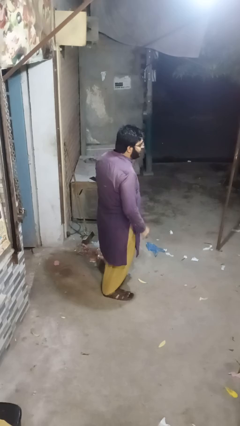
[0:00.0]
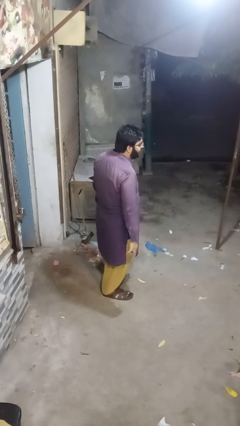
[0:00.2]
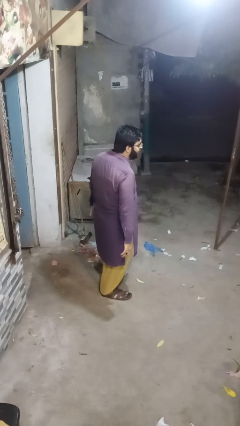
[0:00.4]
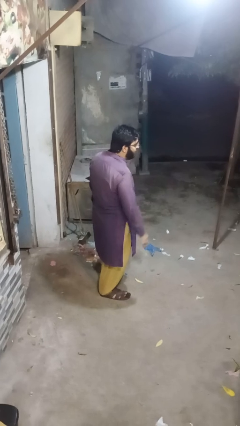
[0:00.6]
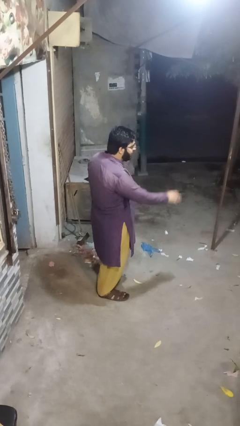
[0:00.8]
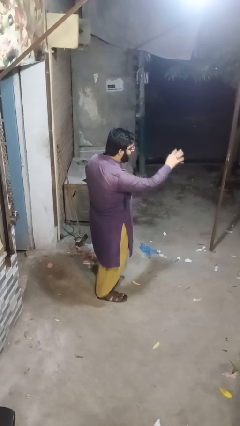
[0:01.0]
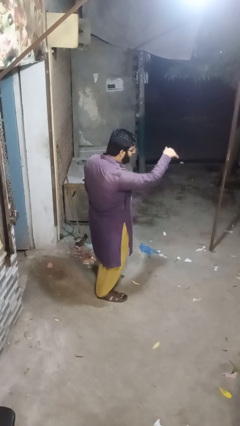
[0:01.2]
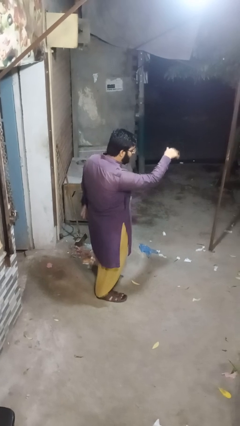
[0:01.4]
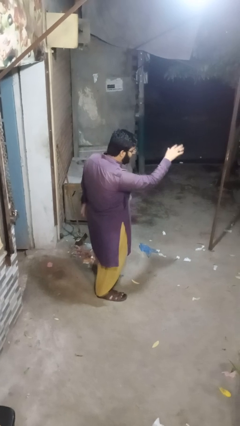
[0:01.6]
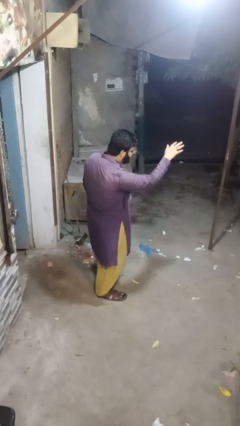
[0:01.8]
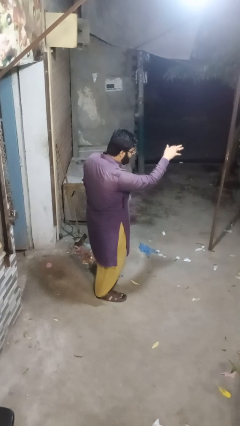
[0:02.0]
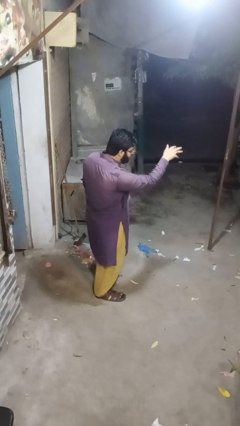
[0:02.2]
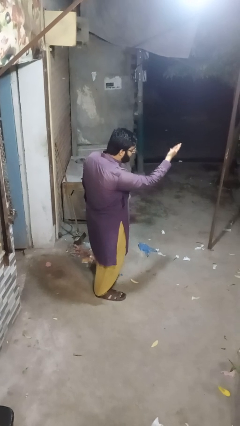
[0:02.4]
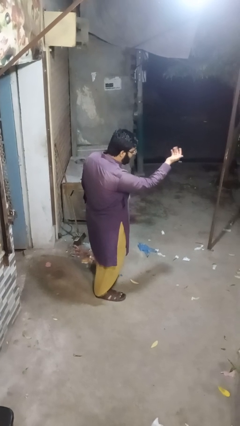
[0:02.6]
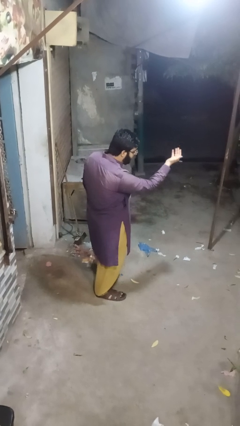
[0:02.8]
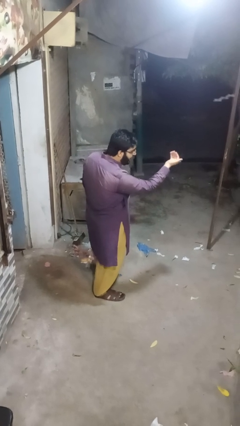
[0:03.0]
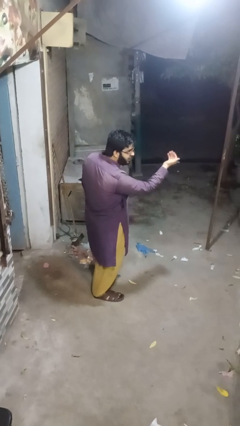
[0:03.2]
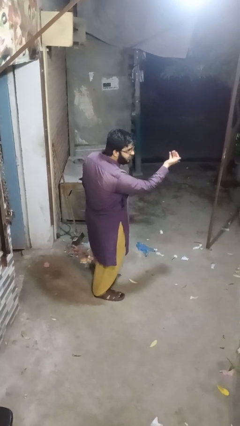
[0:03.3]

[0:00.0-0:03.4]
person gestures come here

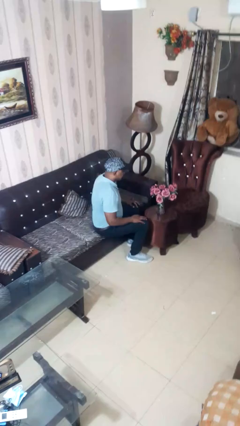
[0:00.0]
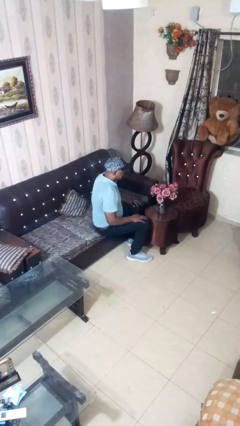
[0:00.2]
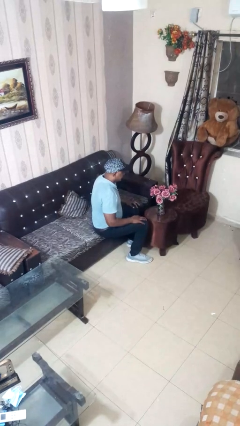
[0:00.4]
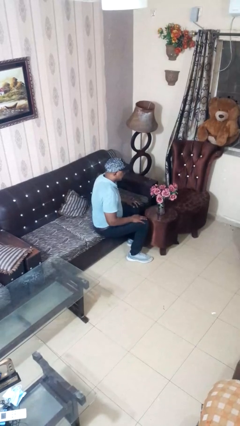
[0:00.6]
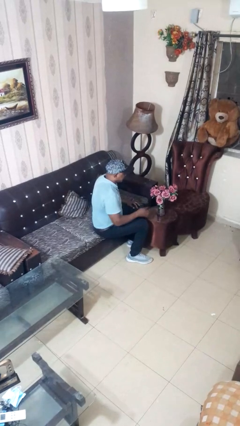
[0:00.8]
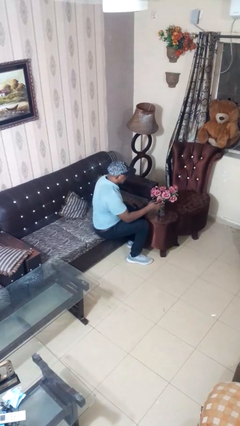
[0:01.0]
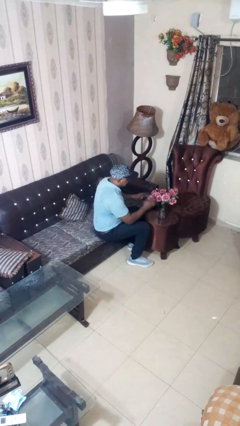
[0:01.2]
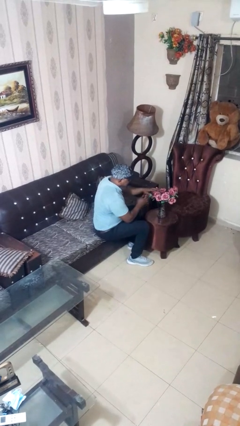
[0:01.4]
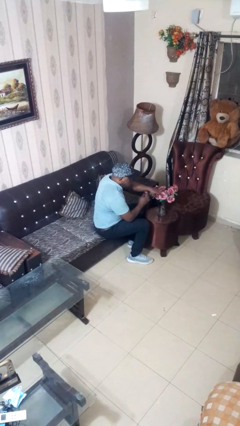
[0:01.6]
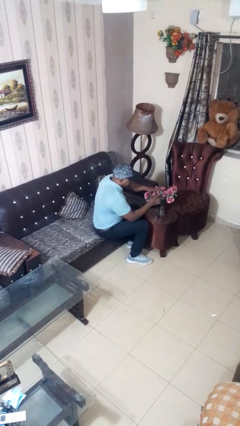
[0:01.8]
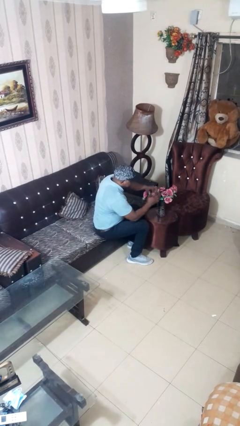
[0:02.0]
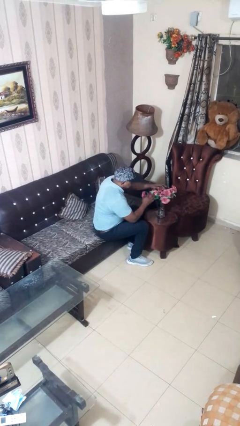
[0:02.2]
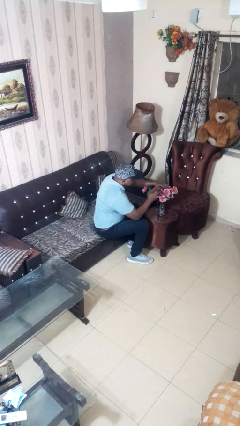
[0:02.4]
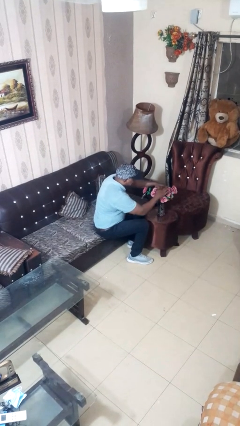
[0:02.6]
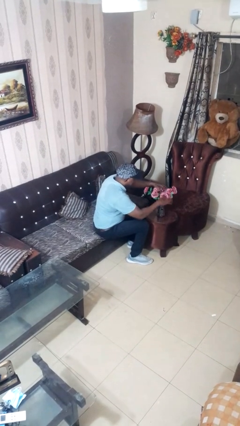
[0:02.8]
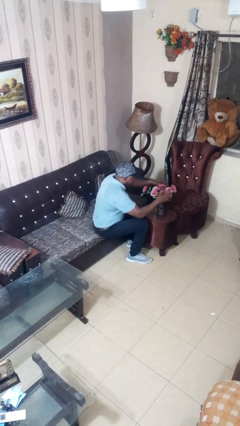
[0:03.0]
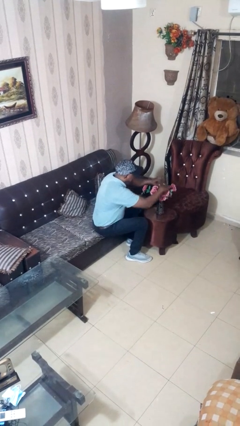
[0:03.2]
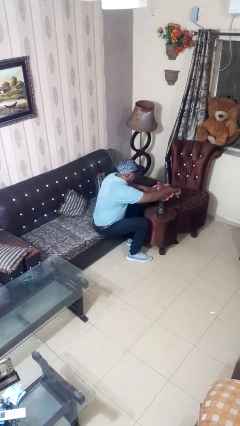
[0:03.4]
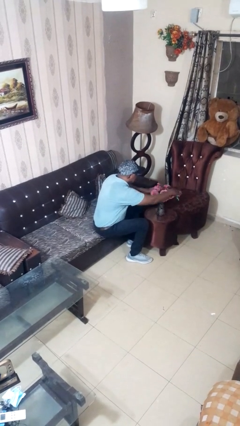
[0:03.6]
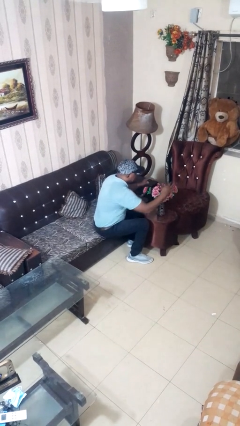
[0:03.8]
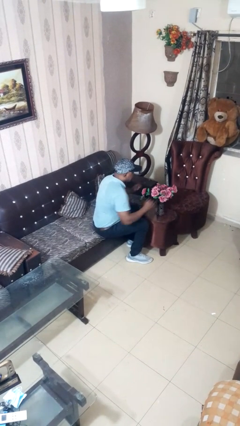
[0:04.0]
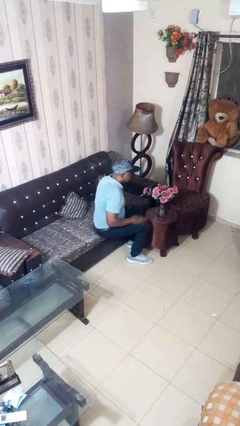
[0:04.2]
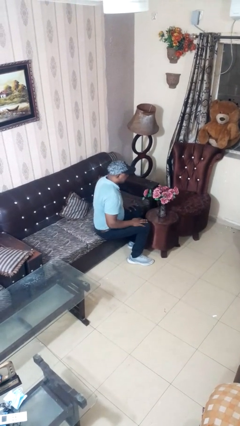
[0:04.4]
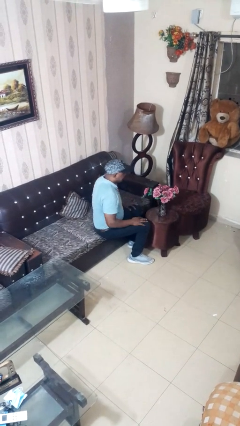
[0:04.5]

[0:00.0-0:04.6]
person arranges flowers in vase

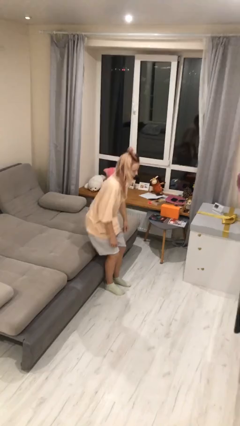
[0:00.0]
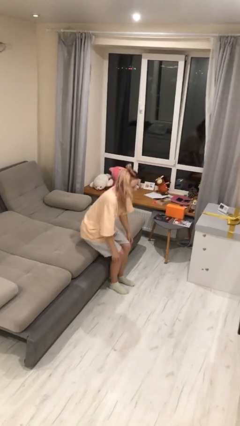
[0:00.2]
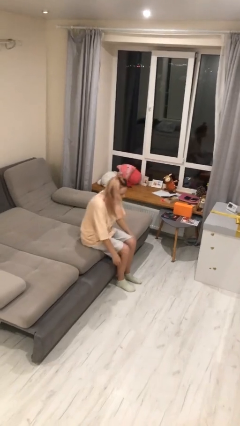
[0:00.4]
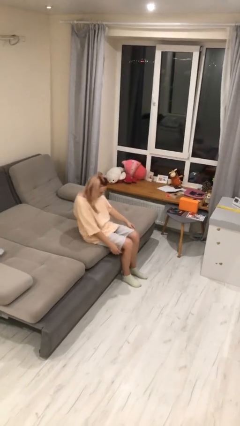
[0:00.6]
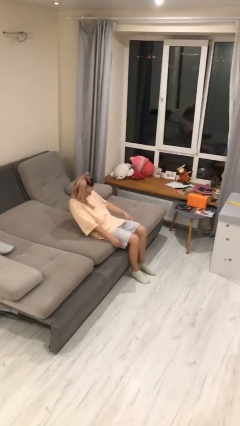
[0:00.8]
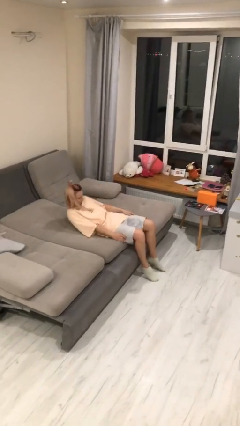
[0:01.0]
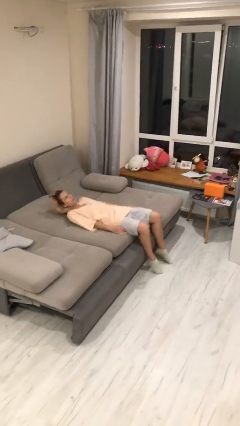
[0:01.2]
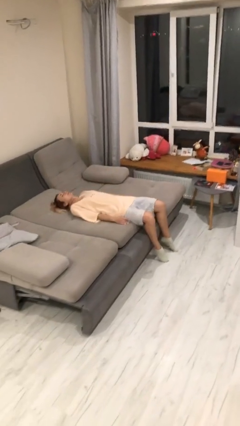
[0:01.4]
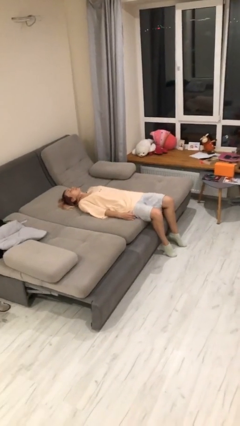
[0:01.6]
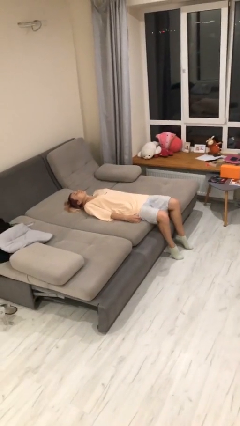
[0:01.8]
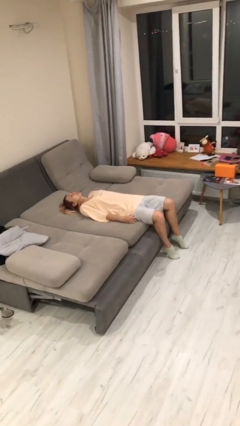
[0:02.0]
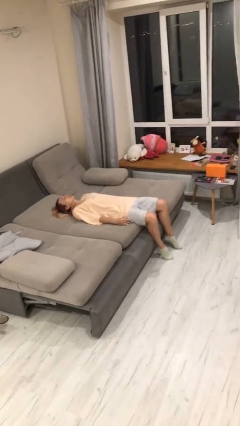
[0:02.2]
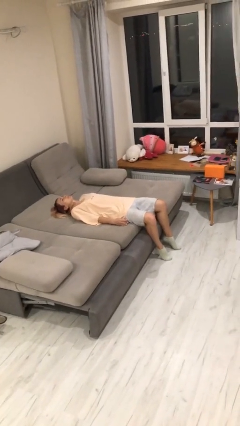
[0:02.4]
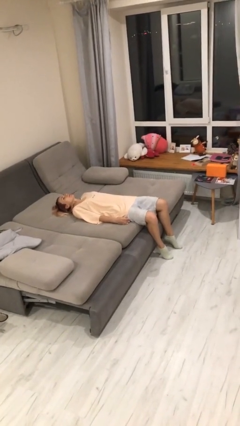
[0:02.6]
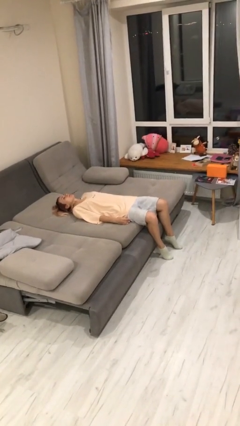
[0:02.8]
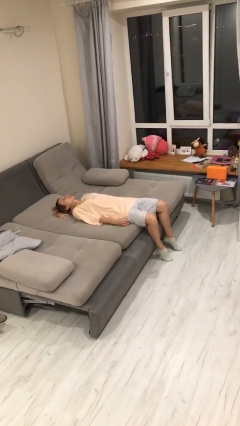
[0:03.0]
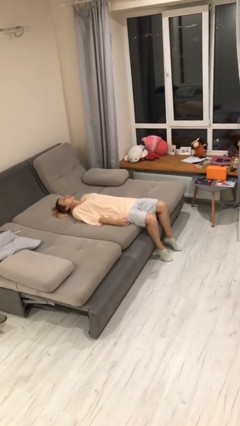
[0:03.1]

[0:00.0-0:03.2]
person lies down on bed

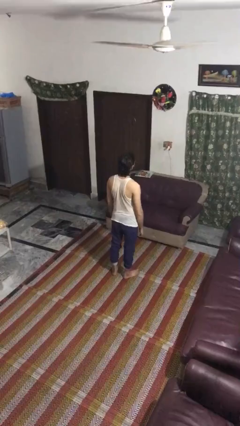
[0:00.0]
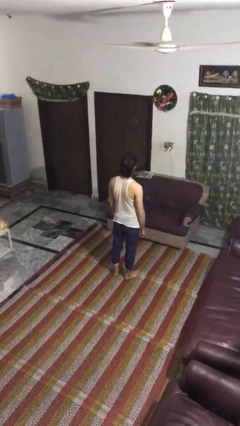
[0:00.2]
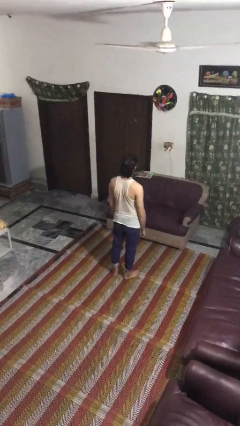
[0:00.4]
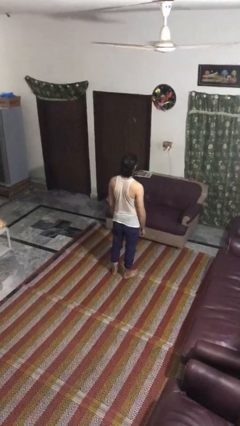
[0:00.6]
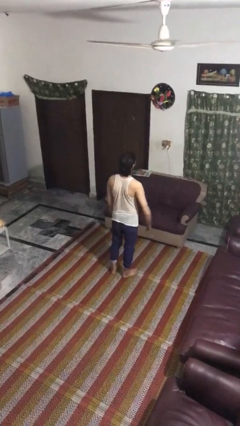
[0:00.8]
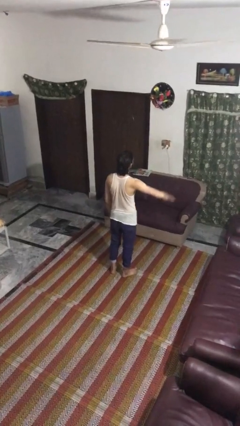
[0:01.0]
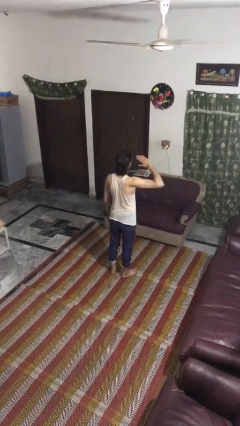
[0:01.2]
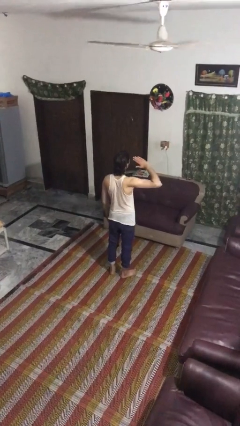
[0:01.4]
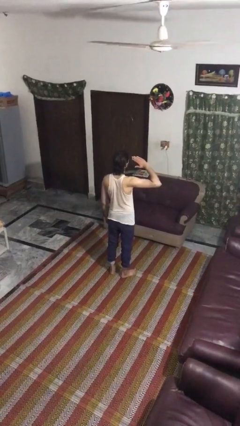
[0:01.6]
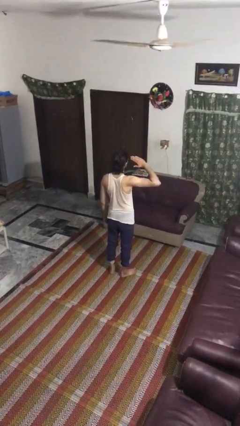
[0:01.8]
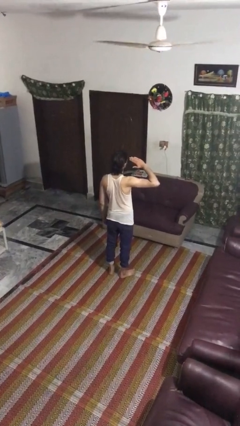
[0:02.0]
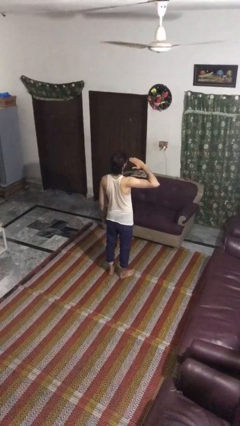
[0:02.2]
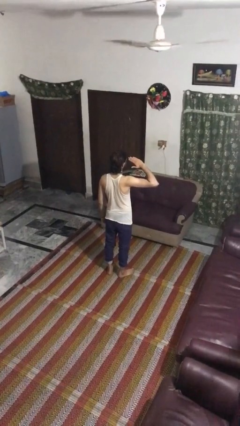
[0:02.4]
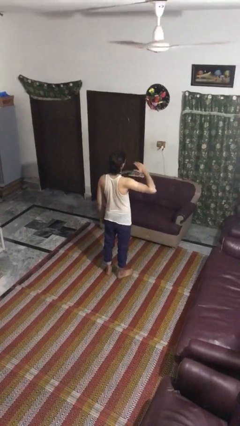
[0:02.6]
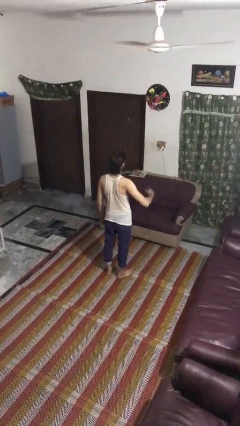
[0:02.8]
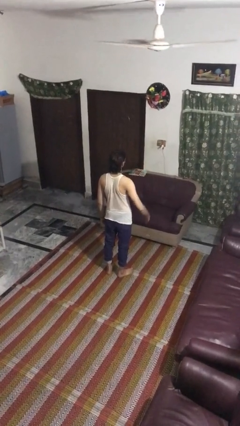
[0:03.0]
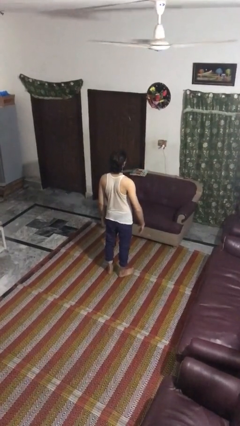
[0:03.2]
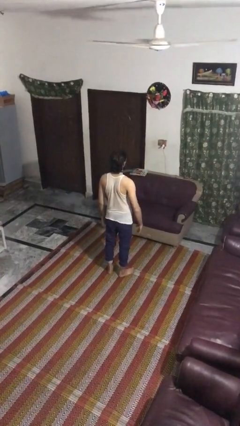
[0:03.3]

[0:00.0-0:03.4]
person salutes

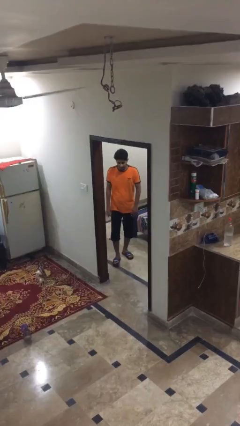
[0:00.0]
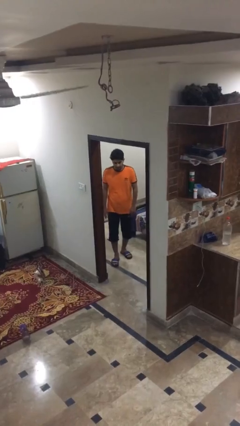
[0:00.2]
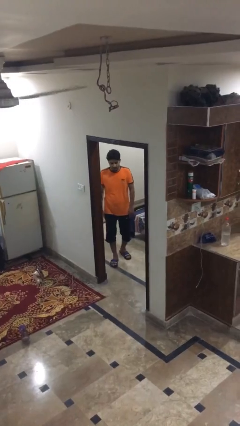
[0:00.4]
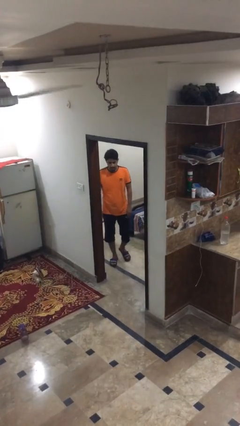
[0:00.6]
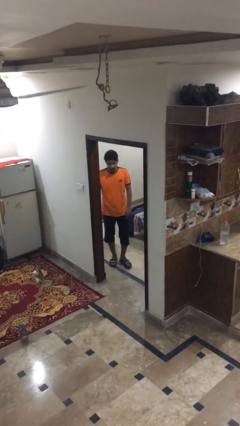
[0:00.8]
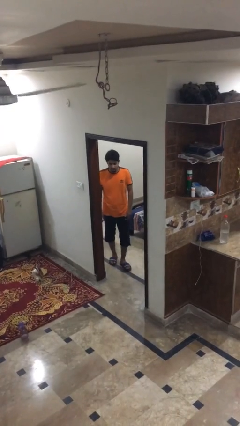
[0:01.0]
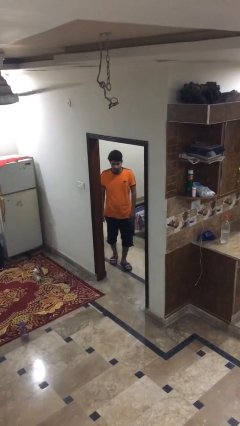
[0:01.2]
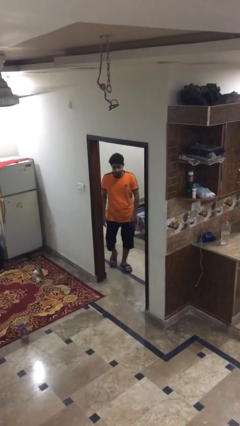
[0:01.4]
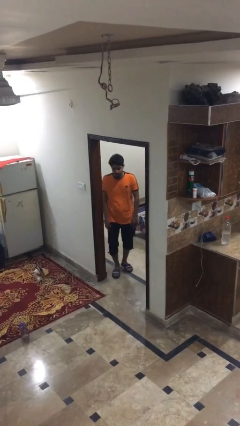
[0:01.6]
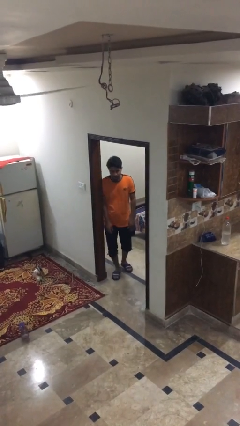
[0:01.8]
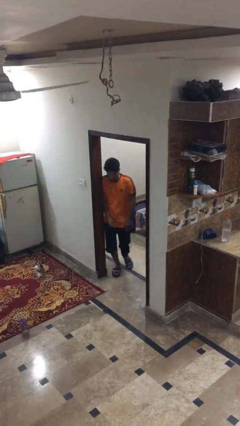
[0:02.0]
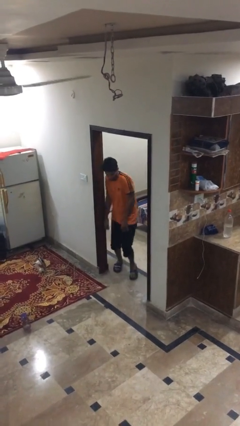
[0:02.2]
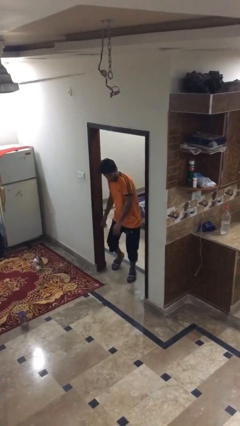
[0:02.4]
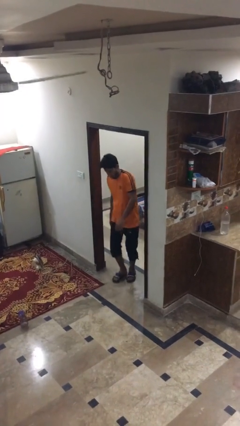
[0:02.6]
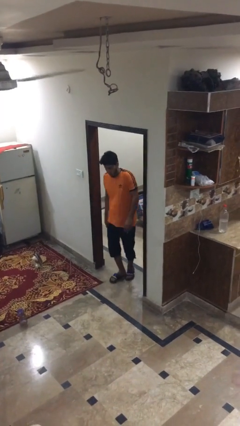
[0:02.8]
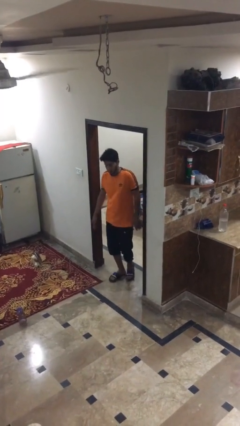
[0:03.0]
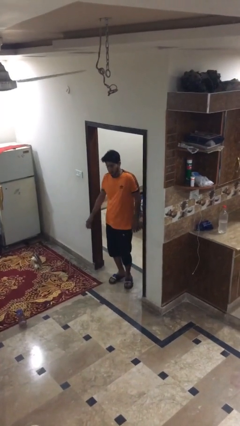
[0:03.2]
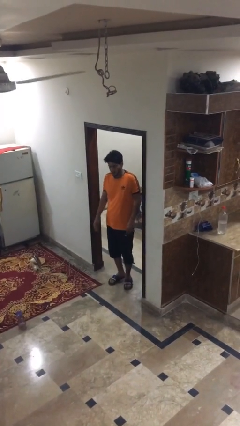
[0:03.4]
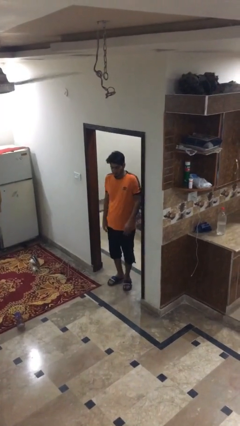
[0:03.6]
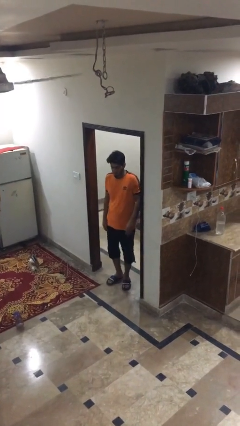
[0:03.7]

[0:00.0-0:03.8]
person bumps into wall
